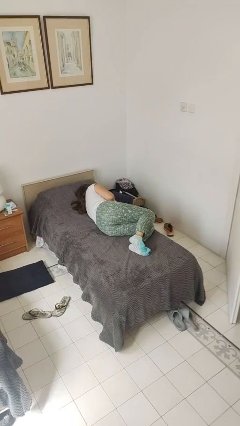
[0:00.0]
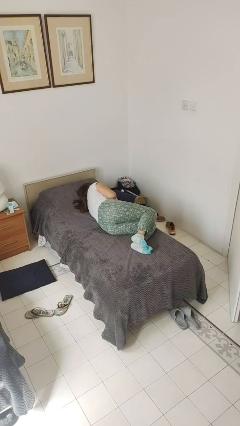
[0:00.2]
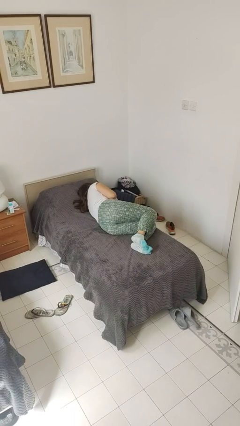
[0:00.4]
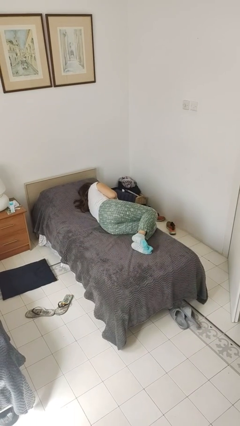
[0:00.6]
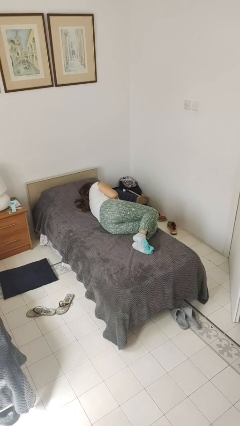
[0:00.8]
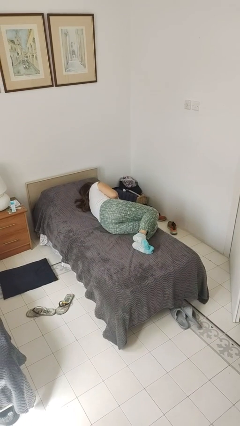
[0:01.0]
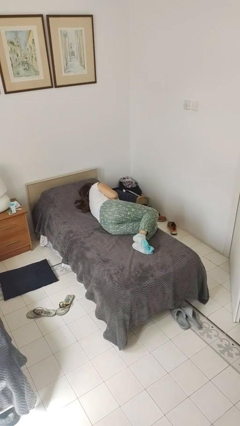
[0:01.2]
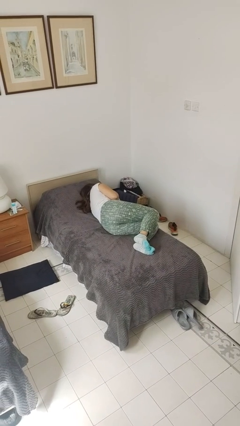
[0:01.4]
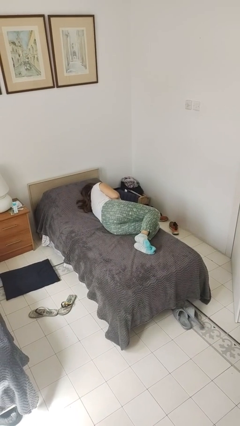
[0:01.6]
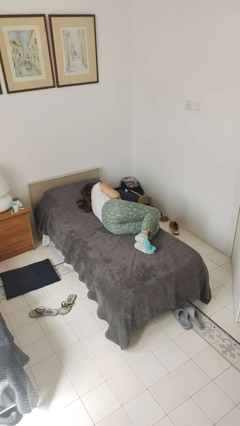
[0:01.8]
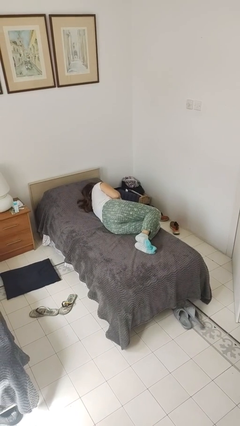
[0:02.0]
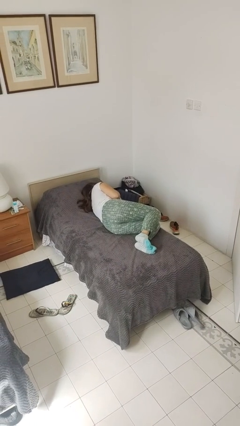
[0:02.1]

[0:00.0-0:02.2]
person falls from bed

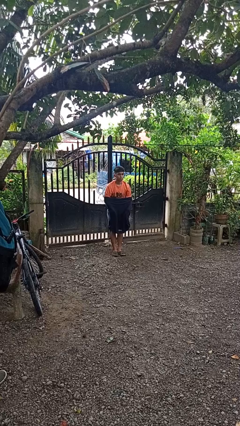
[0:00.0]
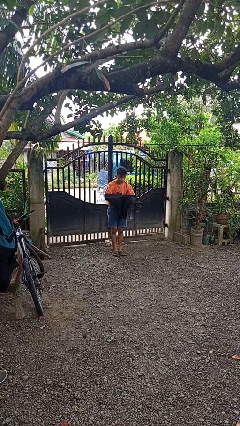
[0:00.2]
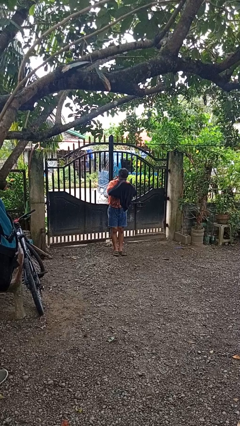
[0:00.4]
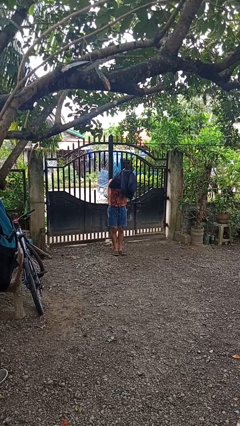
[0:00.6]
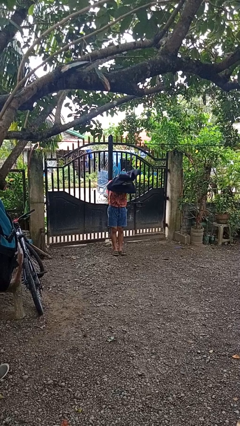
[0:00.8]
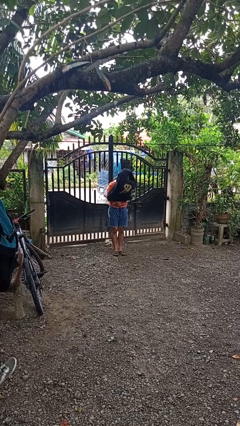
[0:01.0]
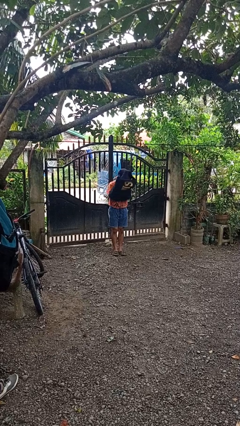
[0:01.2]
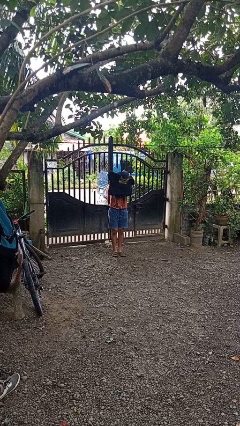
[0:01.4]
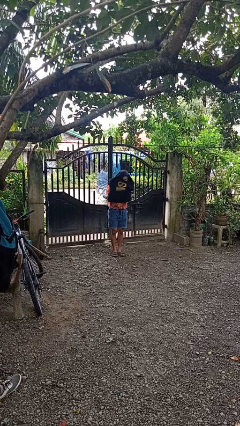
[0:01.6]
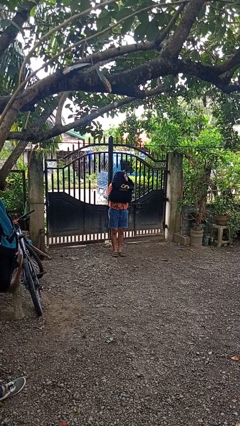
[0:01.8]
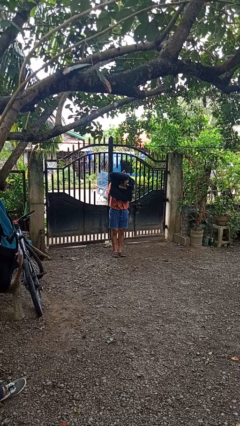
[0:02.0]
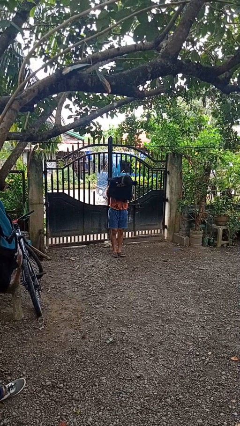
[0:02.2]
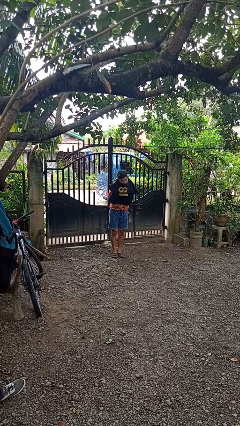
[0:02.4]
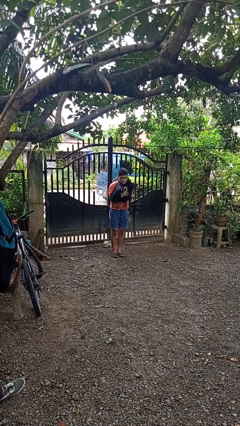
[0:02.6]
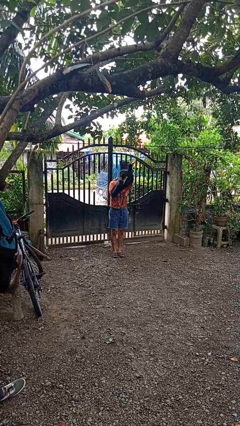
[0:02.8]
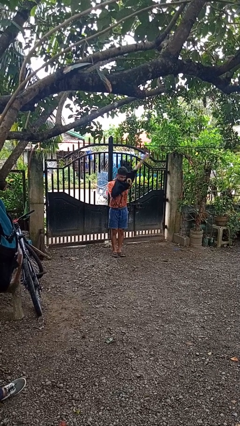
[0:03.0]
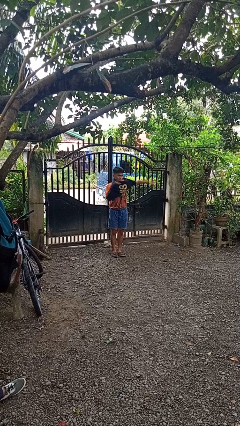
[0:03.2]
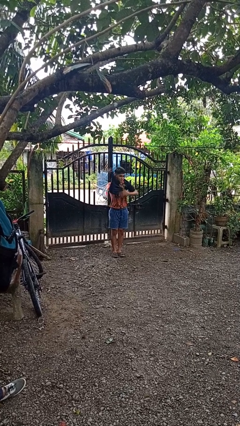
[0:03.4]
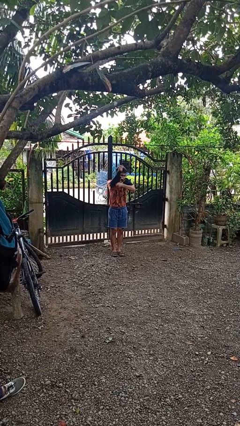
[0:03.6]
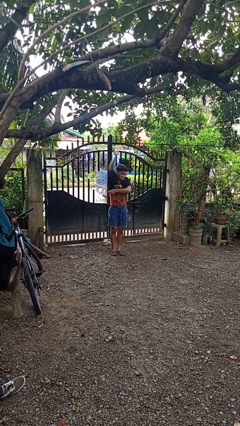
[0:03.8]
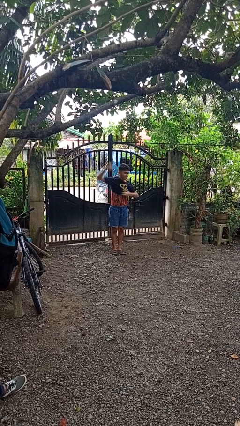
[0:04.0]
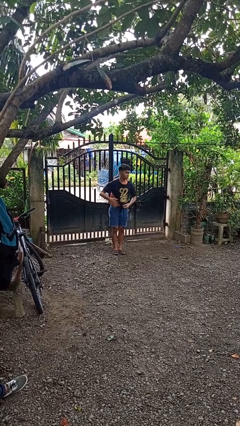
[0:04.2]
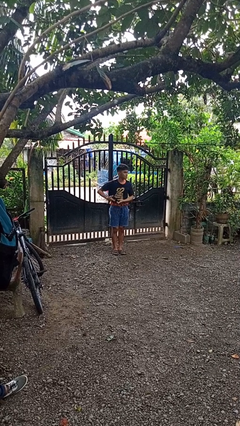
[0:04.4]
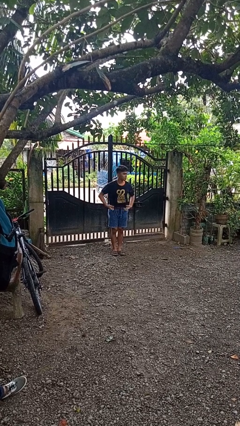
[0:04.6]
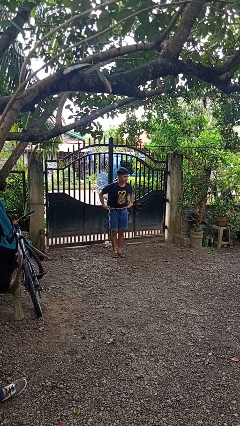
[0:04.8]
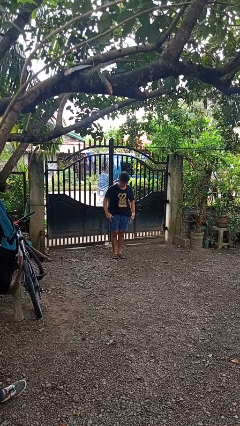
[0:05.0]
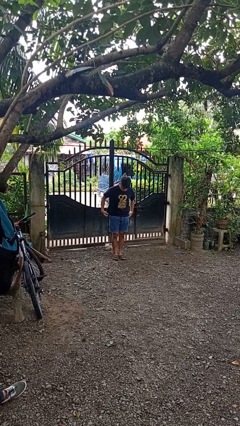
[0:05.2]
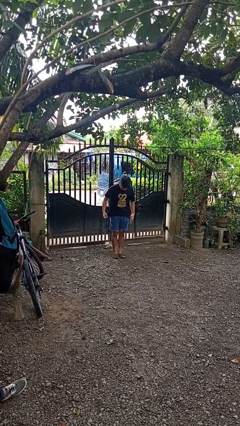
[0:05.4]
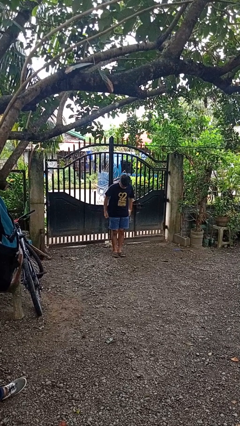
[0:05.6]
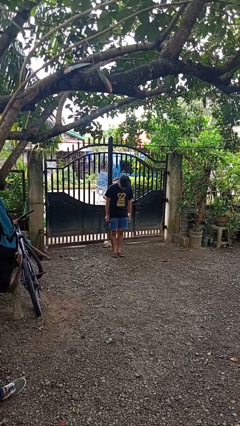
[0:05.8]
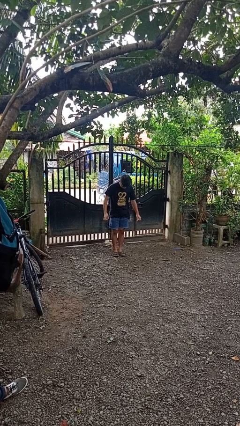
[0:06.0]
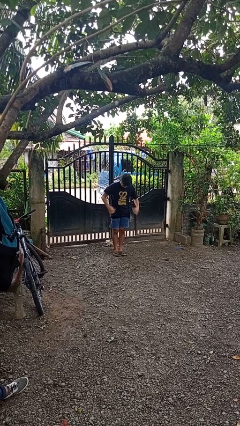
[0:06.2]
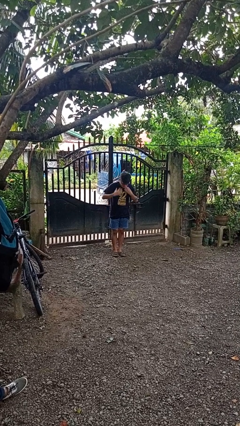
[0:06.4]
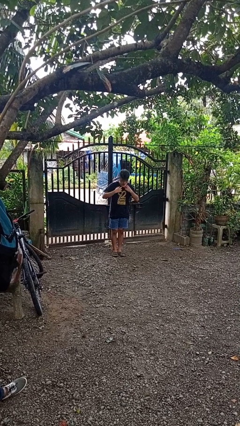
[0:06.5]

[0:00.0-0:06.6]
person puts on shirt

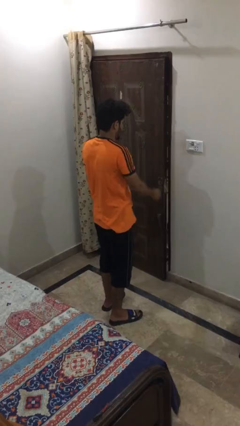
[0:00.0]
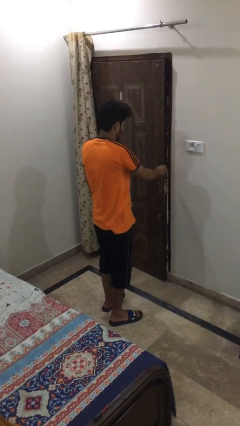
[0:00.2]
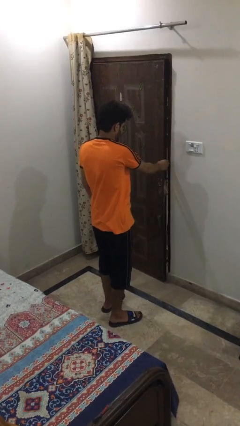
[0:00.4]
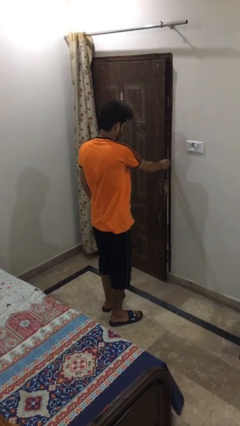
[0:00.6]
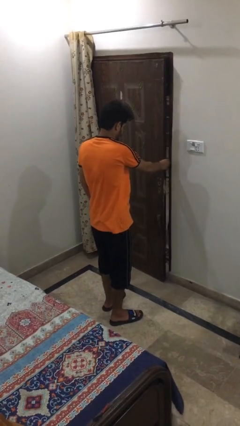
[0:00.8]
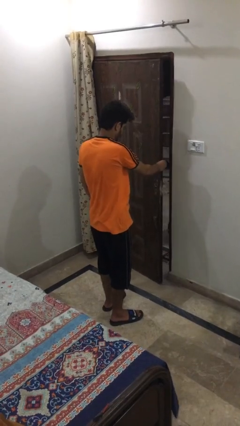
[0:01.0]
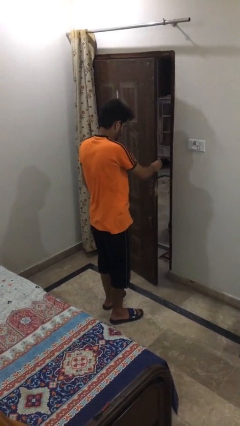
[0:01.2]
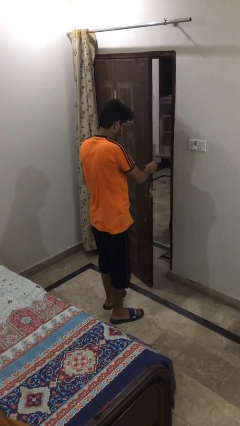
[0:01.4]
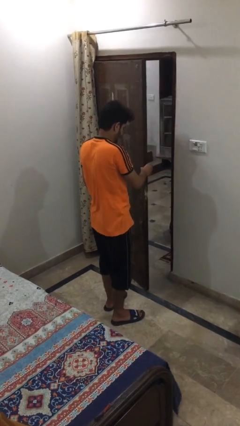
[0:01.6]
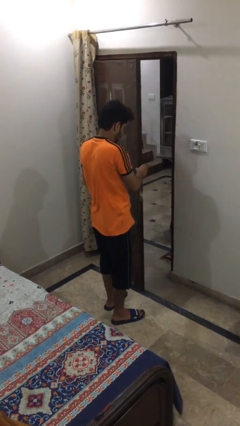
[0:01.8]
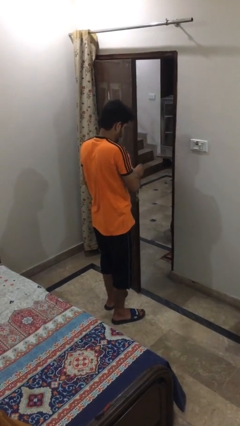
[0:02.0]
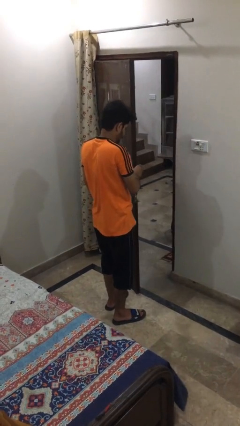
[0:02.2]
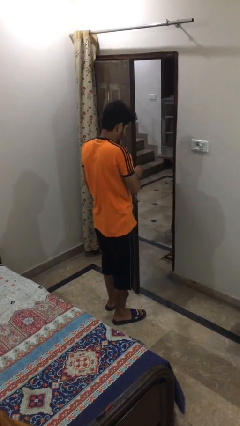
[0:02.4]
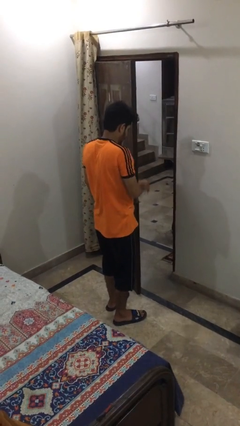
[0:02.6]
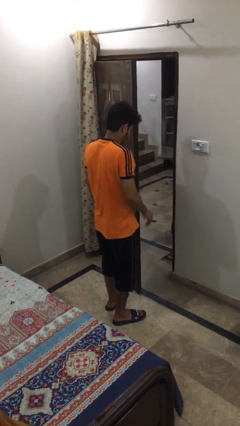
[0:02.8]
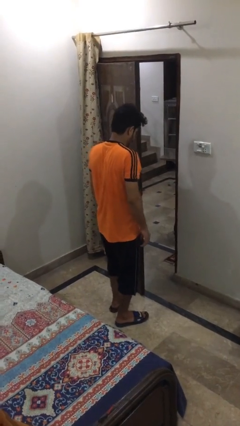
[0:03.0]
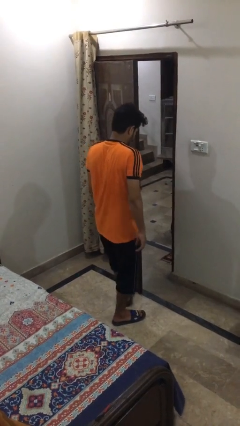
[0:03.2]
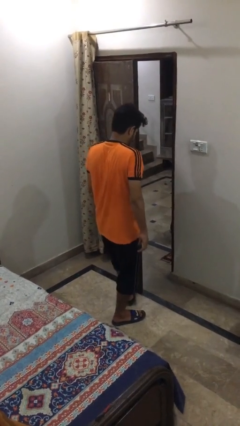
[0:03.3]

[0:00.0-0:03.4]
person opens facility door

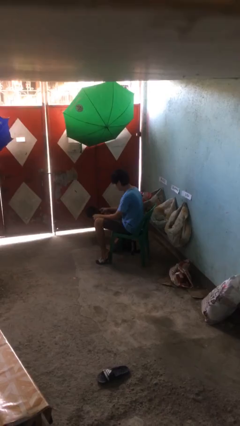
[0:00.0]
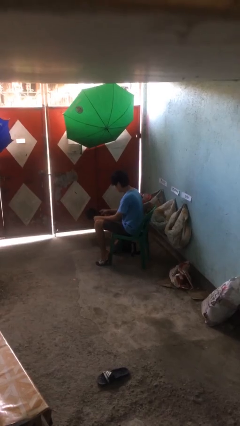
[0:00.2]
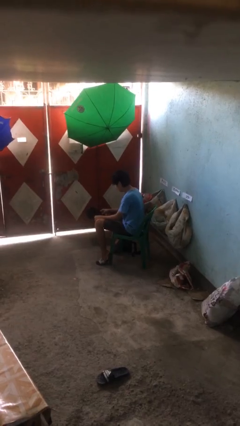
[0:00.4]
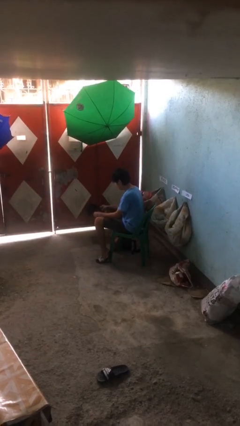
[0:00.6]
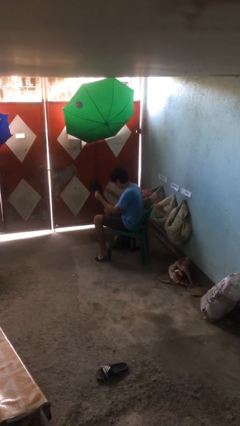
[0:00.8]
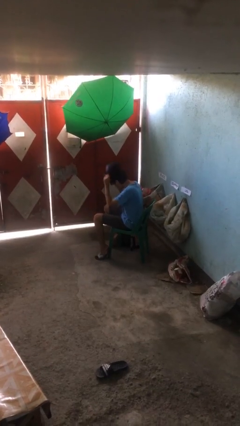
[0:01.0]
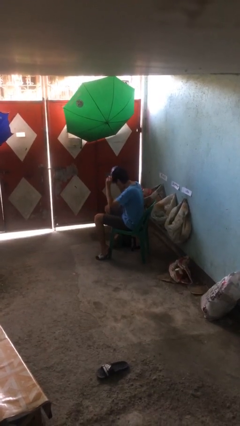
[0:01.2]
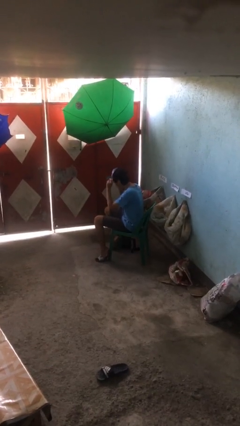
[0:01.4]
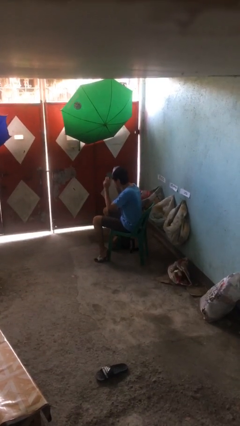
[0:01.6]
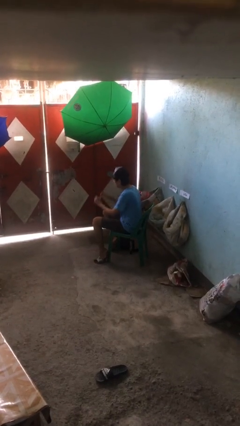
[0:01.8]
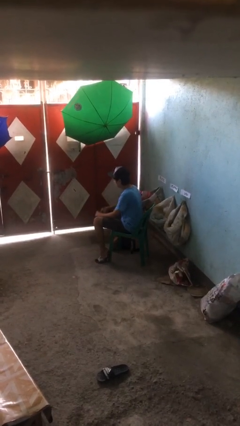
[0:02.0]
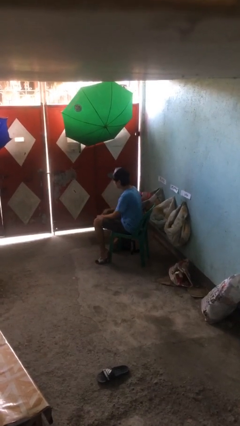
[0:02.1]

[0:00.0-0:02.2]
person puts on hat

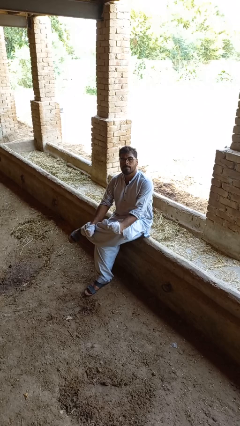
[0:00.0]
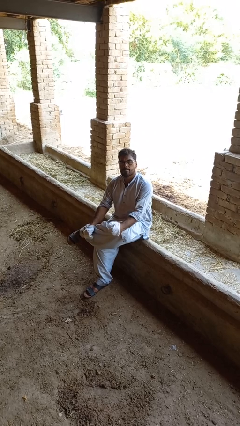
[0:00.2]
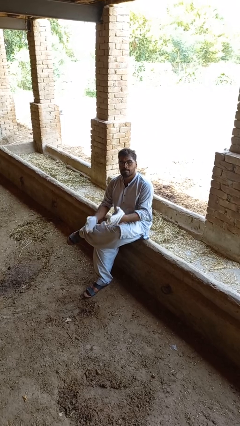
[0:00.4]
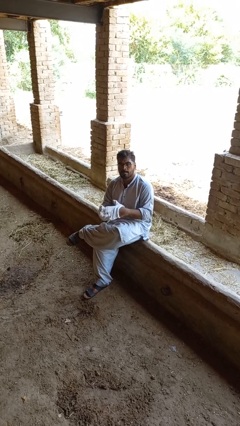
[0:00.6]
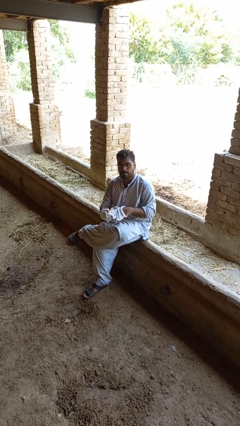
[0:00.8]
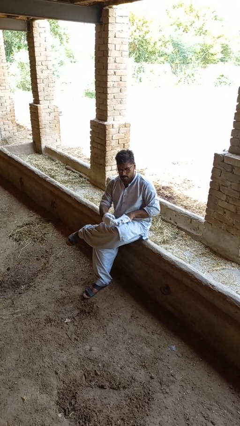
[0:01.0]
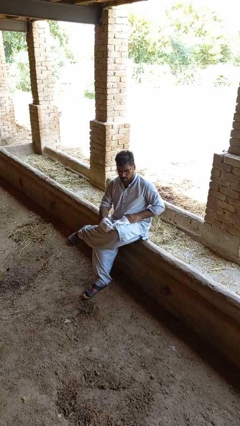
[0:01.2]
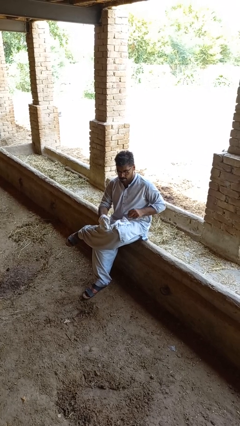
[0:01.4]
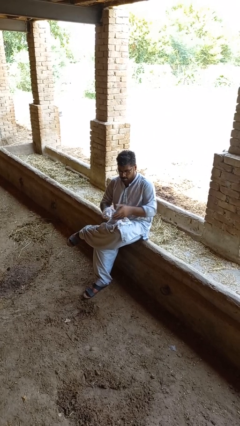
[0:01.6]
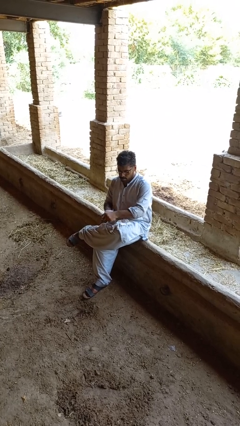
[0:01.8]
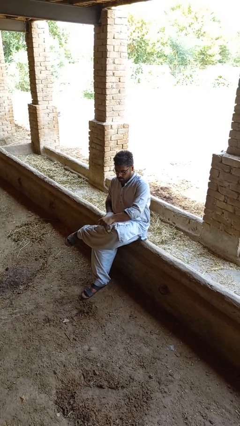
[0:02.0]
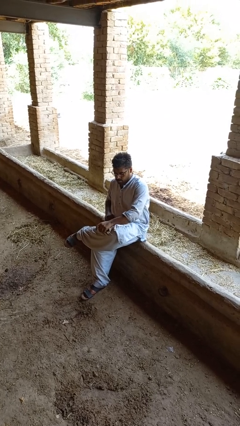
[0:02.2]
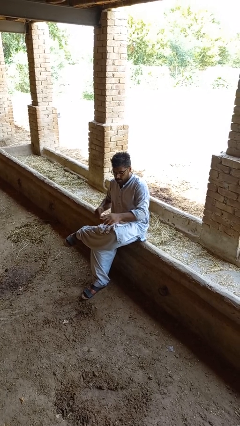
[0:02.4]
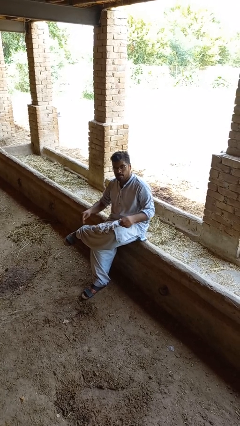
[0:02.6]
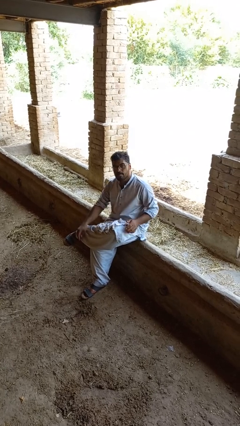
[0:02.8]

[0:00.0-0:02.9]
person takes off gloves

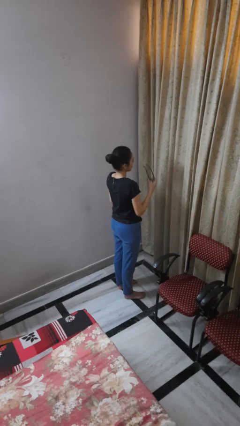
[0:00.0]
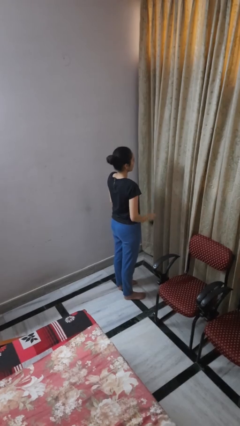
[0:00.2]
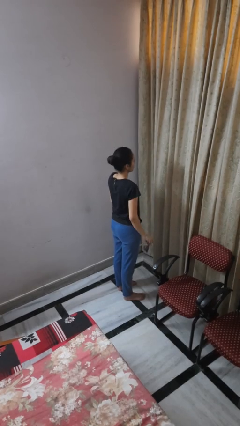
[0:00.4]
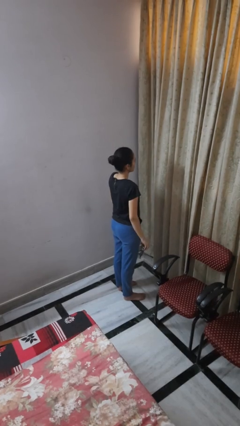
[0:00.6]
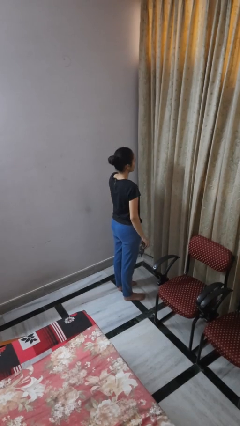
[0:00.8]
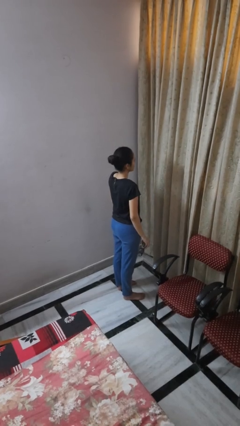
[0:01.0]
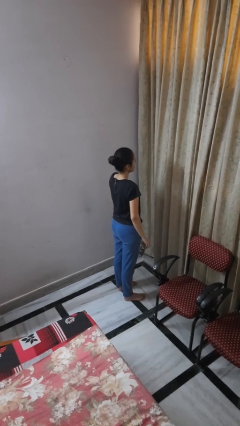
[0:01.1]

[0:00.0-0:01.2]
person takes off sunglasses
